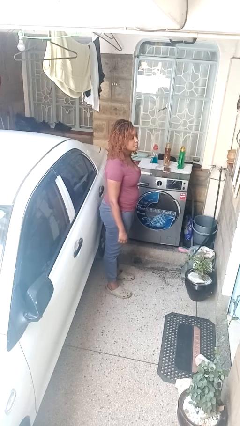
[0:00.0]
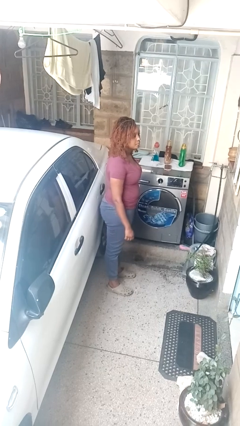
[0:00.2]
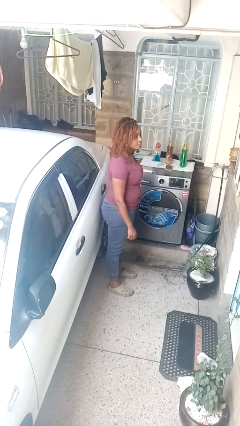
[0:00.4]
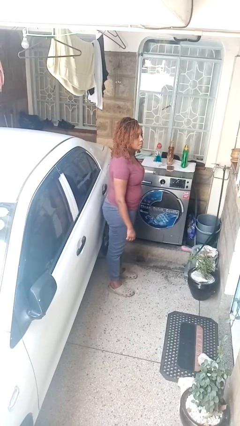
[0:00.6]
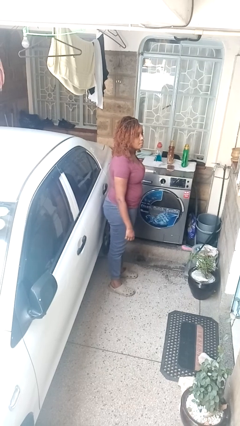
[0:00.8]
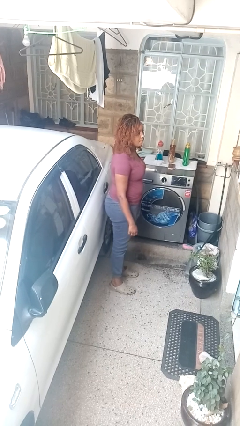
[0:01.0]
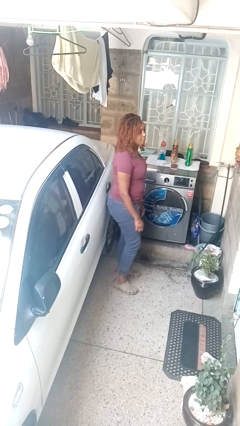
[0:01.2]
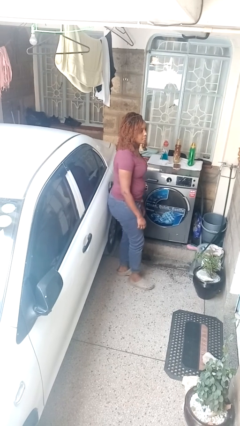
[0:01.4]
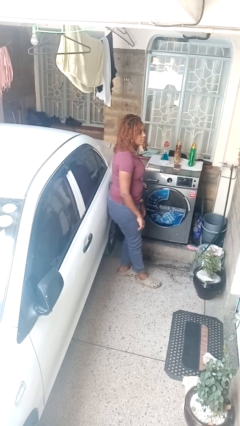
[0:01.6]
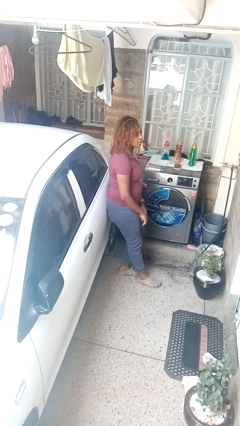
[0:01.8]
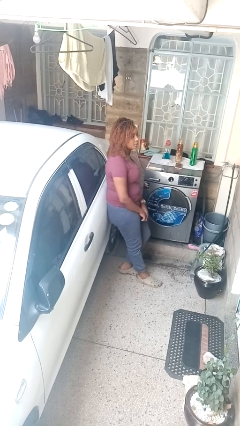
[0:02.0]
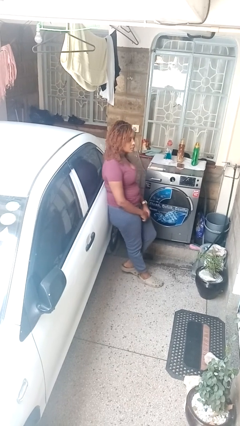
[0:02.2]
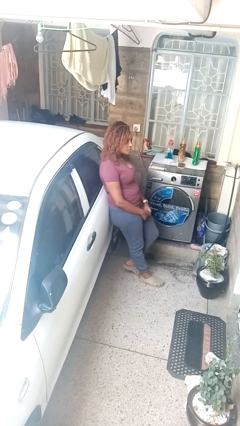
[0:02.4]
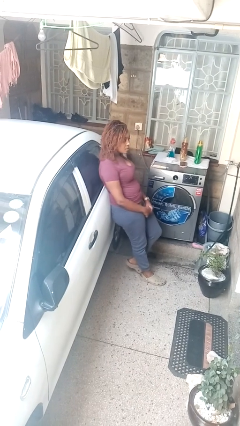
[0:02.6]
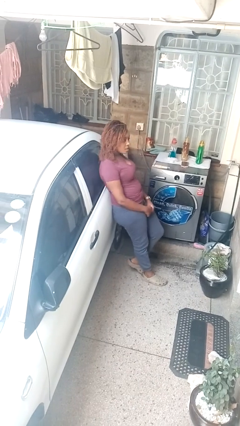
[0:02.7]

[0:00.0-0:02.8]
person leans against car

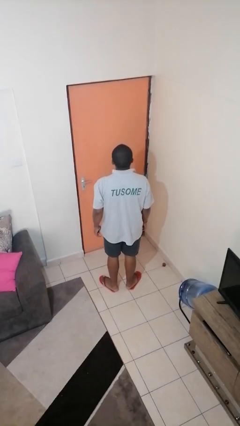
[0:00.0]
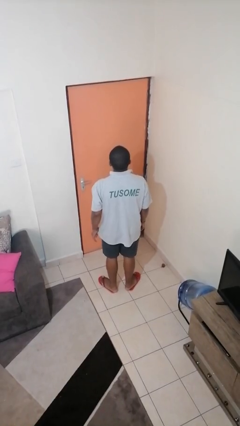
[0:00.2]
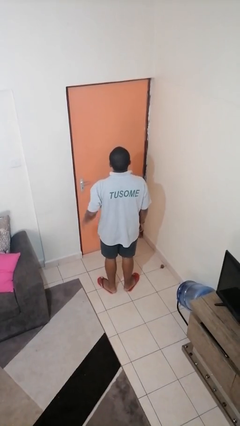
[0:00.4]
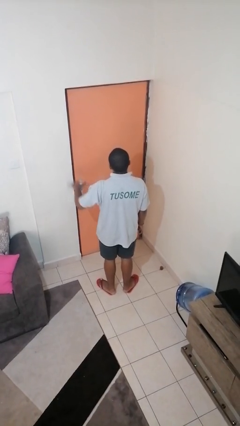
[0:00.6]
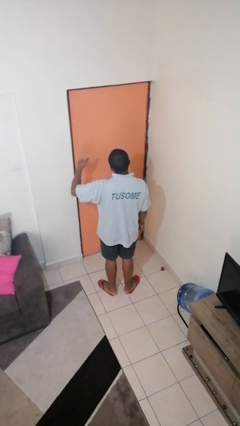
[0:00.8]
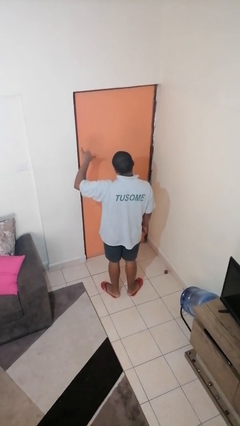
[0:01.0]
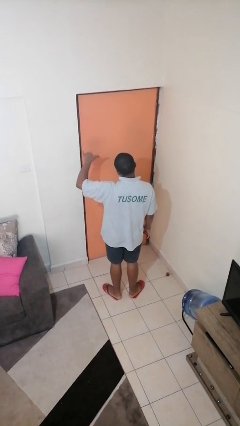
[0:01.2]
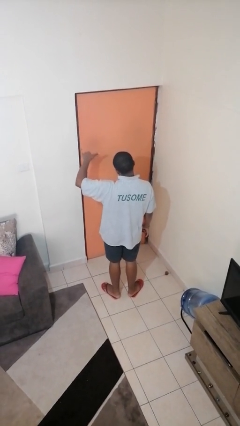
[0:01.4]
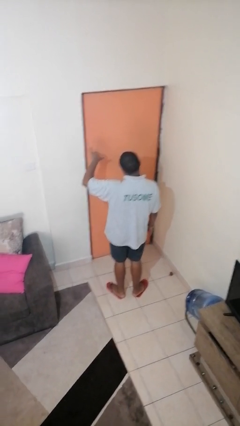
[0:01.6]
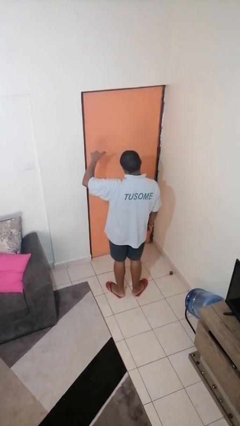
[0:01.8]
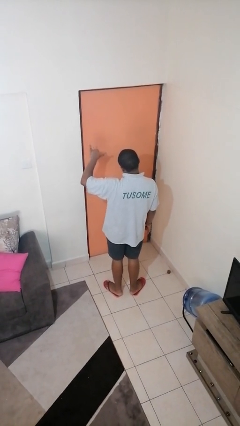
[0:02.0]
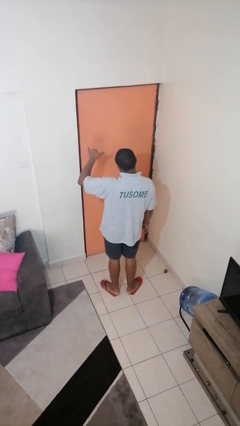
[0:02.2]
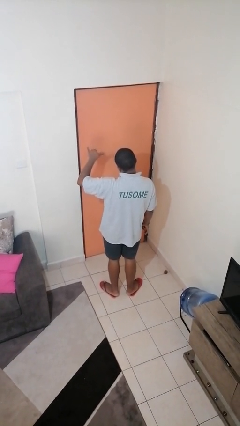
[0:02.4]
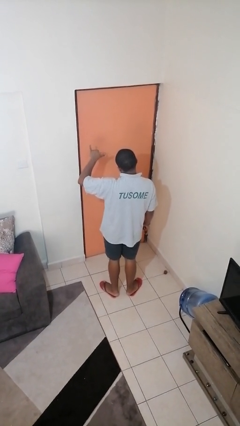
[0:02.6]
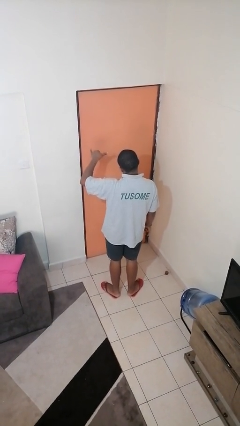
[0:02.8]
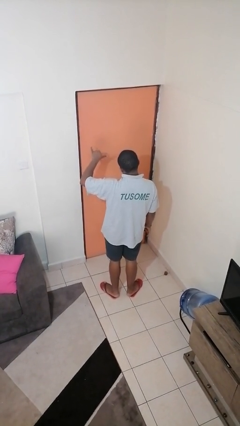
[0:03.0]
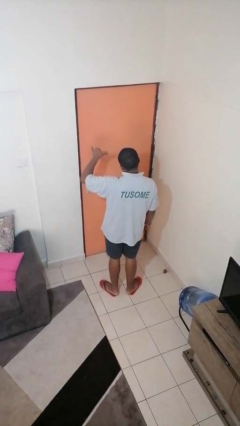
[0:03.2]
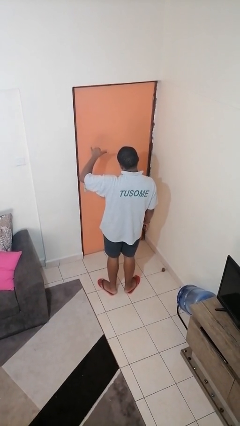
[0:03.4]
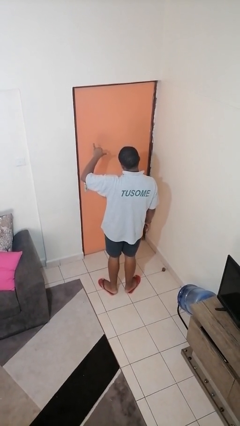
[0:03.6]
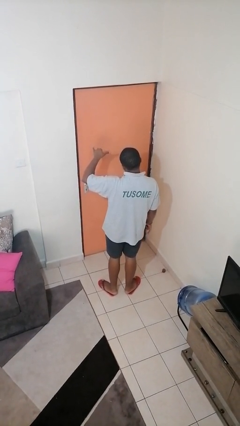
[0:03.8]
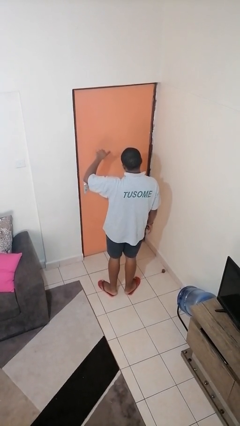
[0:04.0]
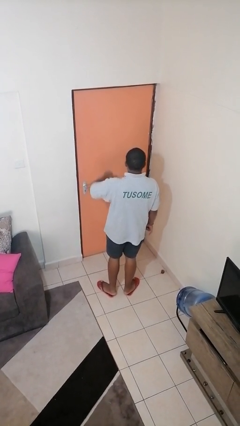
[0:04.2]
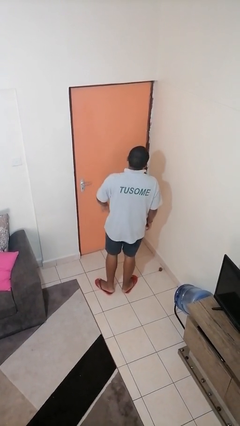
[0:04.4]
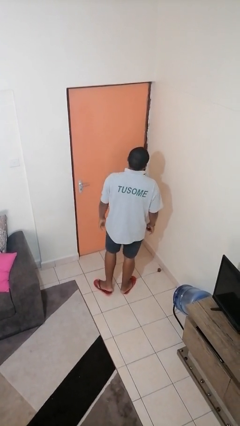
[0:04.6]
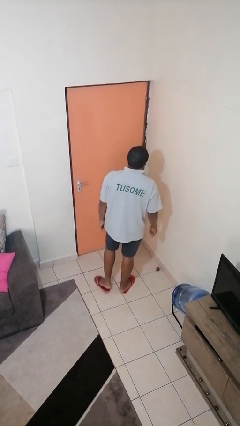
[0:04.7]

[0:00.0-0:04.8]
person gestures hang loose

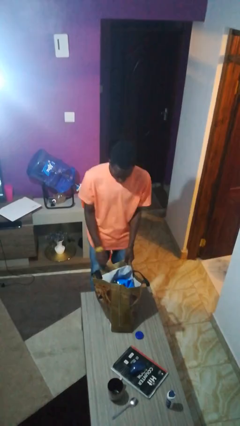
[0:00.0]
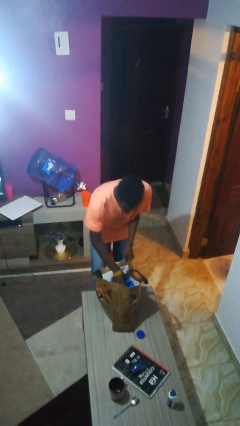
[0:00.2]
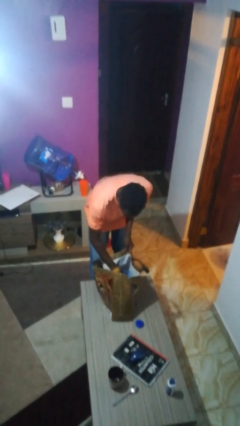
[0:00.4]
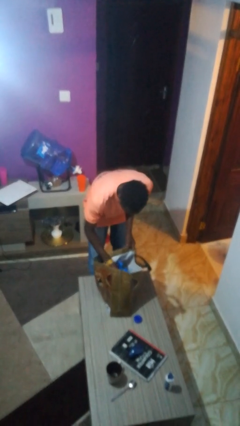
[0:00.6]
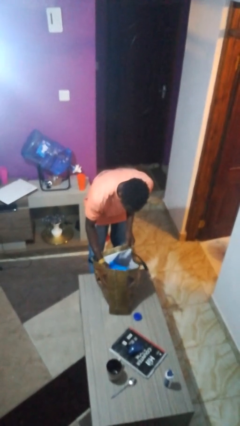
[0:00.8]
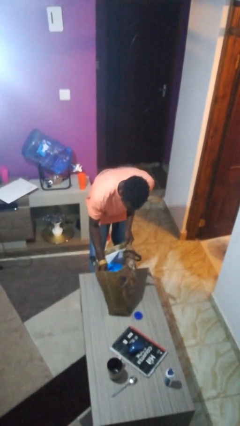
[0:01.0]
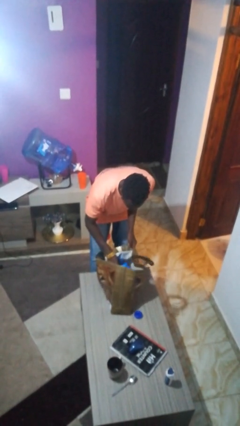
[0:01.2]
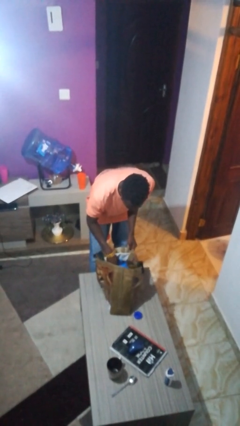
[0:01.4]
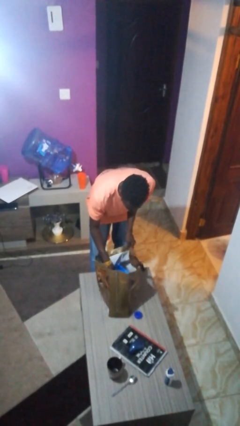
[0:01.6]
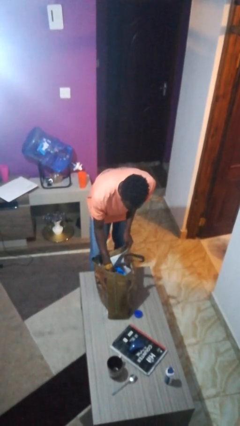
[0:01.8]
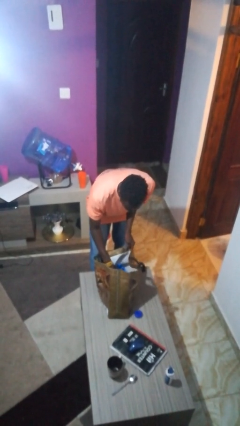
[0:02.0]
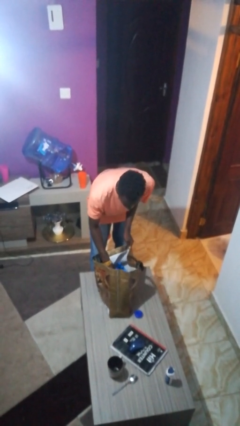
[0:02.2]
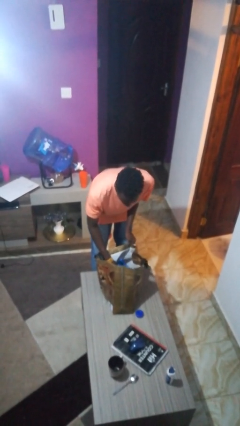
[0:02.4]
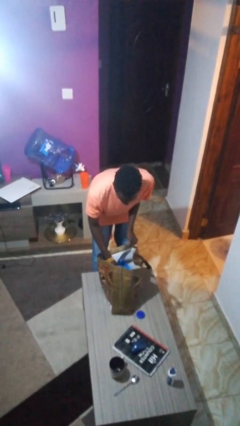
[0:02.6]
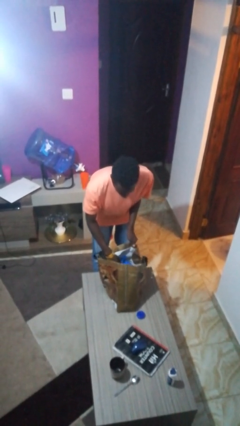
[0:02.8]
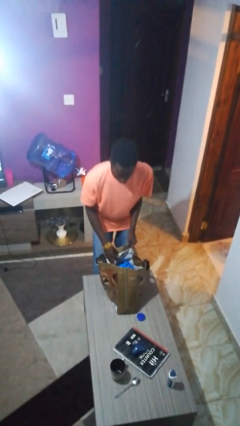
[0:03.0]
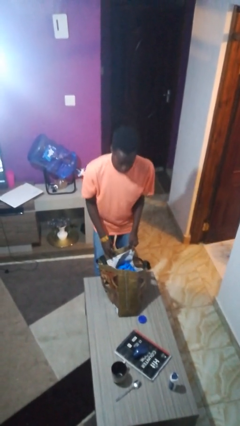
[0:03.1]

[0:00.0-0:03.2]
person searches in bag

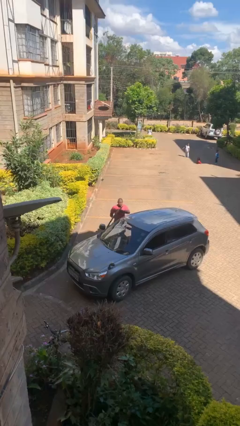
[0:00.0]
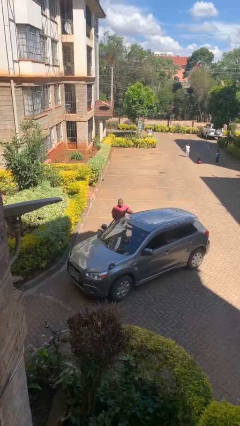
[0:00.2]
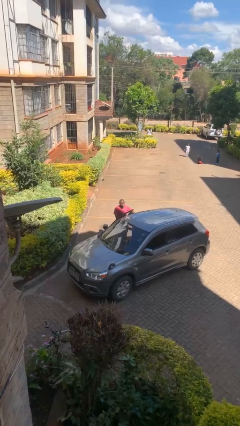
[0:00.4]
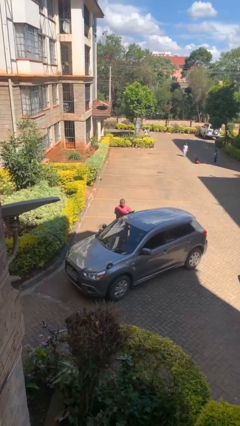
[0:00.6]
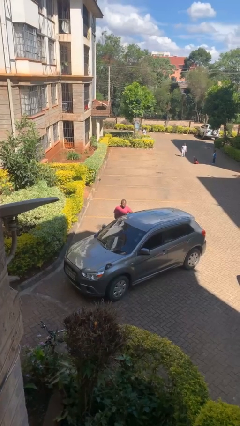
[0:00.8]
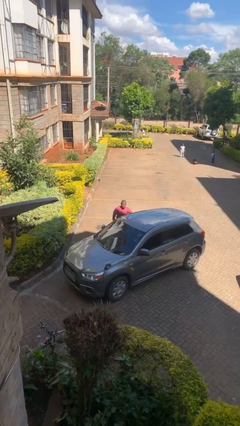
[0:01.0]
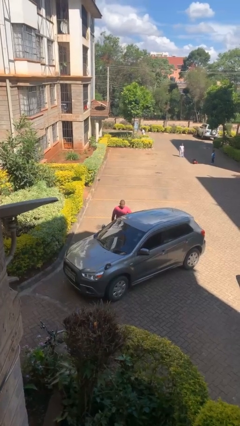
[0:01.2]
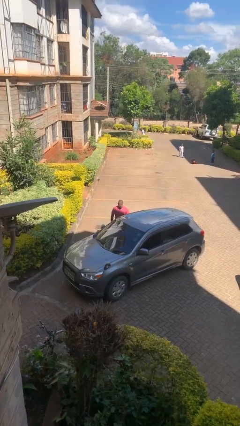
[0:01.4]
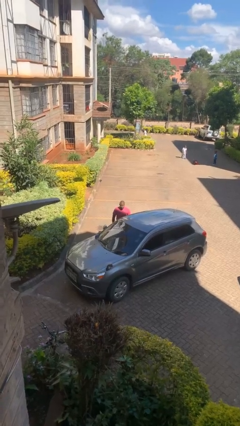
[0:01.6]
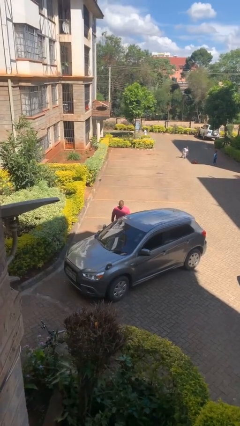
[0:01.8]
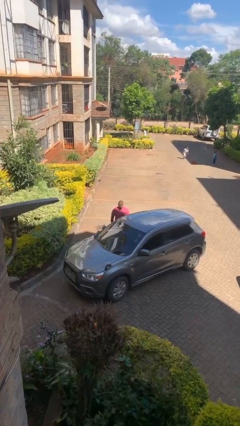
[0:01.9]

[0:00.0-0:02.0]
person closes car door

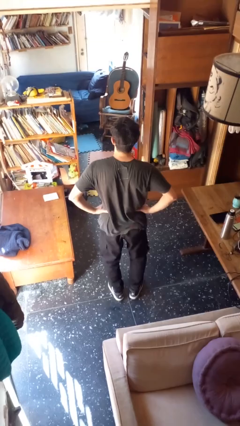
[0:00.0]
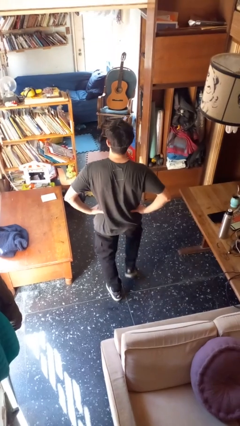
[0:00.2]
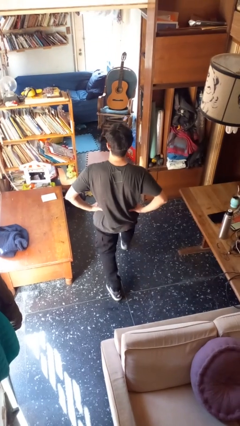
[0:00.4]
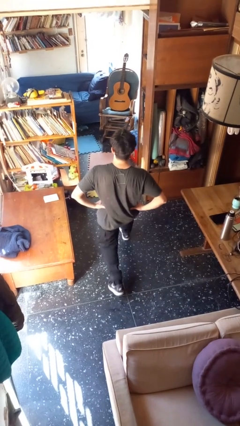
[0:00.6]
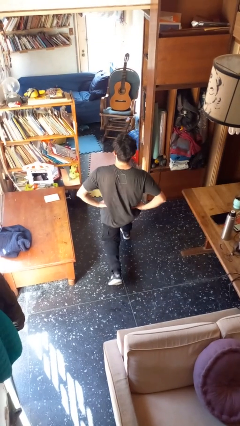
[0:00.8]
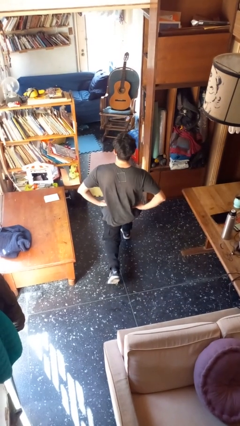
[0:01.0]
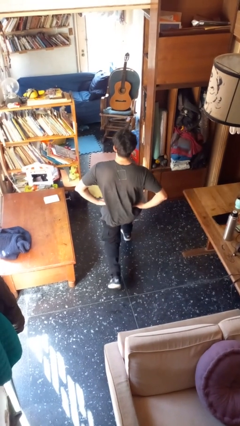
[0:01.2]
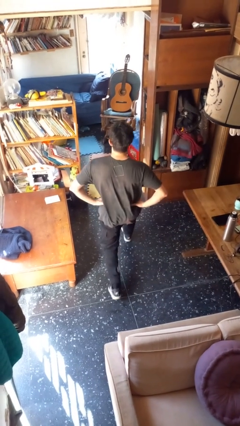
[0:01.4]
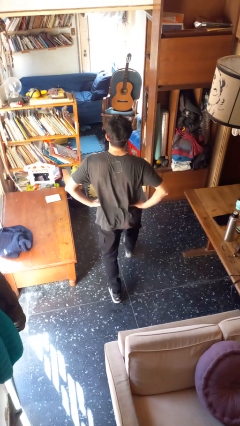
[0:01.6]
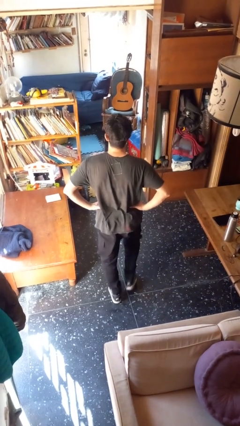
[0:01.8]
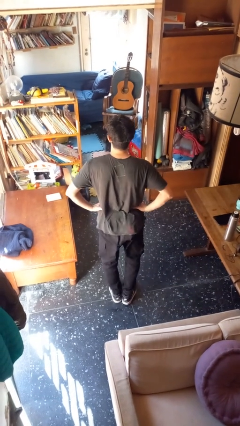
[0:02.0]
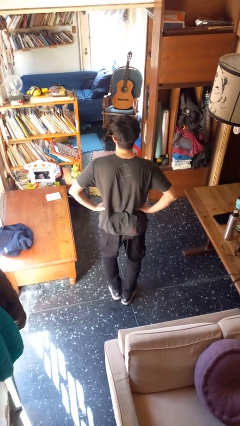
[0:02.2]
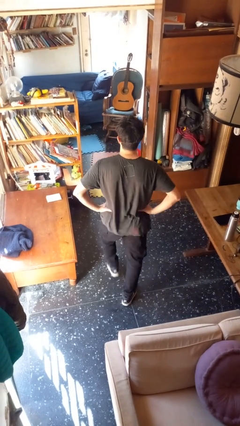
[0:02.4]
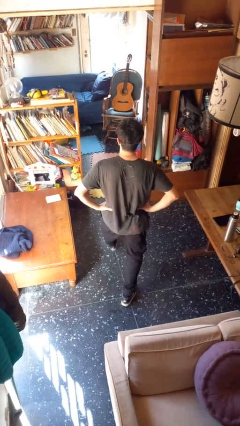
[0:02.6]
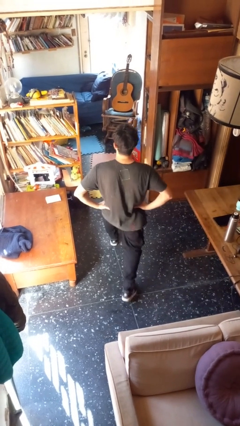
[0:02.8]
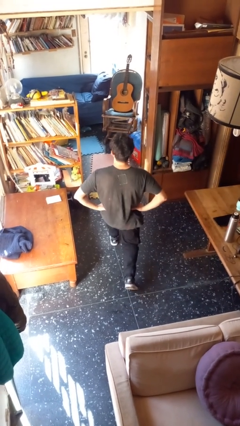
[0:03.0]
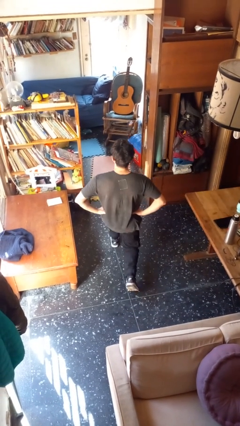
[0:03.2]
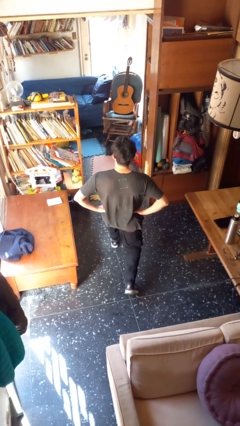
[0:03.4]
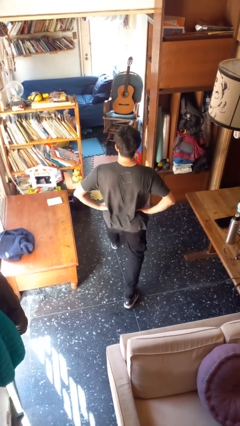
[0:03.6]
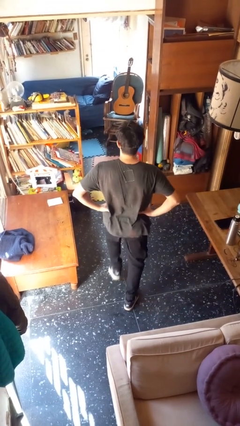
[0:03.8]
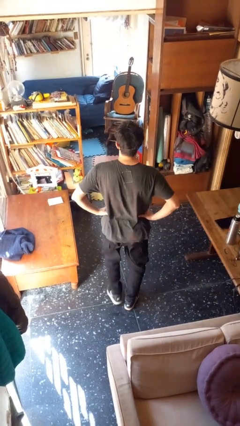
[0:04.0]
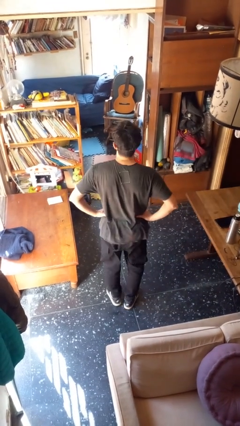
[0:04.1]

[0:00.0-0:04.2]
person exercises with lunges

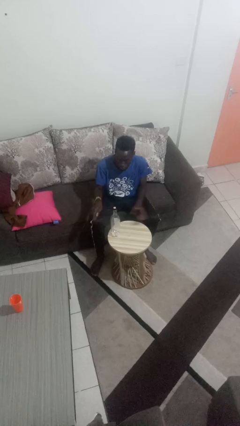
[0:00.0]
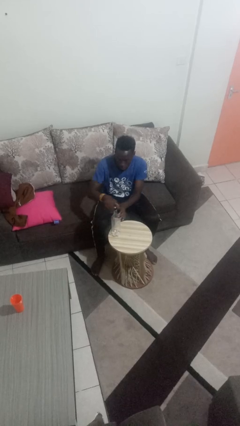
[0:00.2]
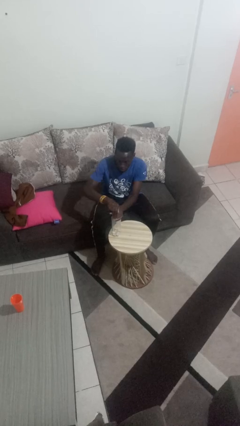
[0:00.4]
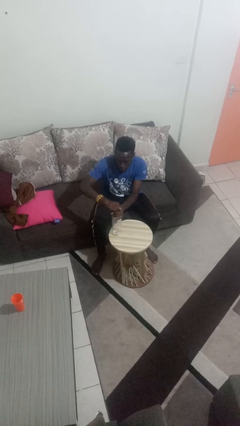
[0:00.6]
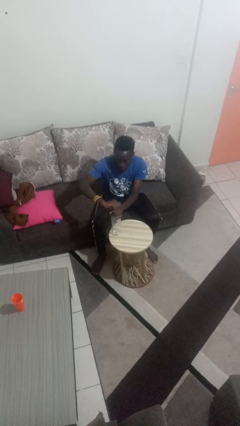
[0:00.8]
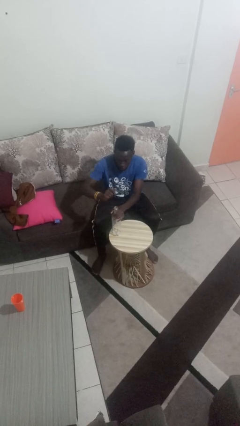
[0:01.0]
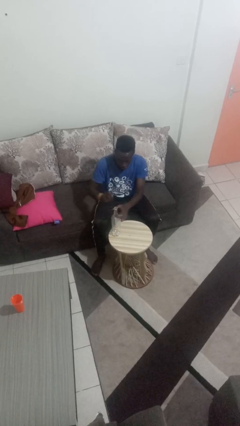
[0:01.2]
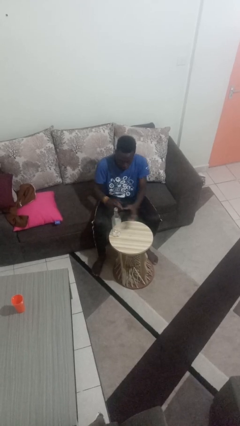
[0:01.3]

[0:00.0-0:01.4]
person unscrews lid from bottle
